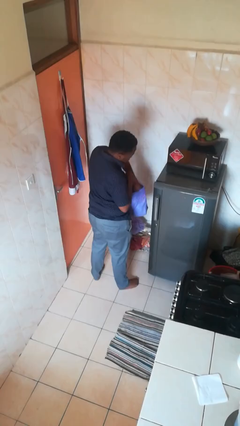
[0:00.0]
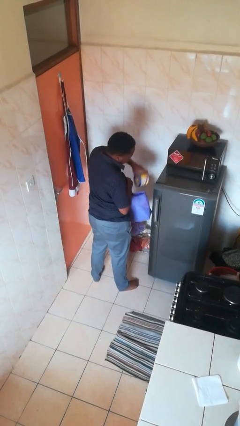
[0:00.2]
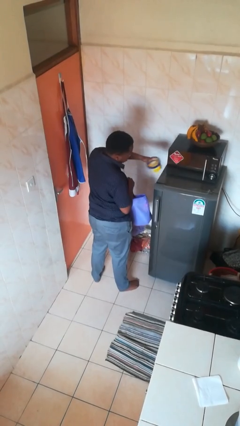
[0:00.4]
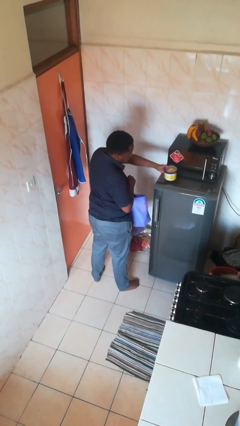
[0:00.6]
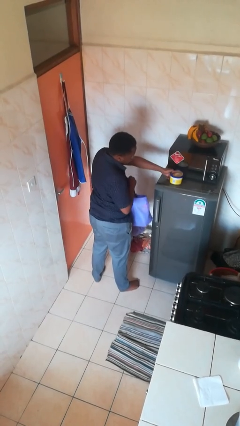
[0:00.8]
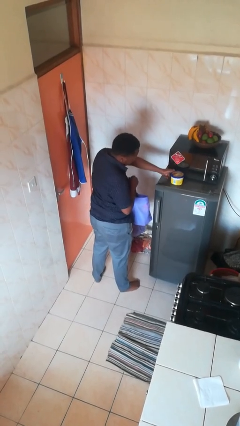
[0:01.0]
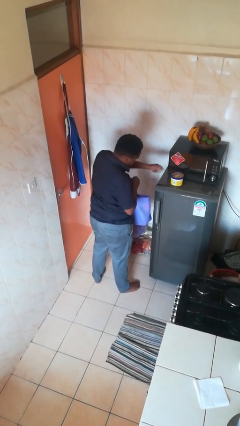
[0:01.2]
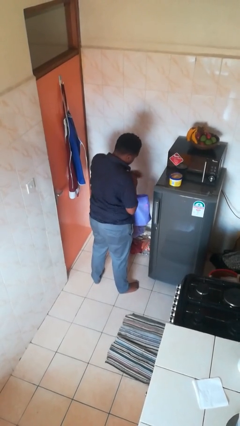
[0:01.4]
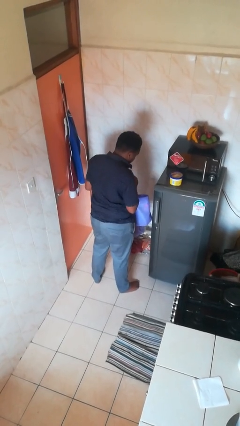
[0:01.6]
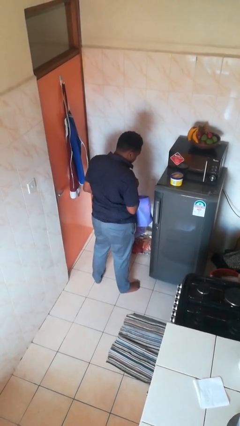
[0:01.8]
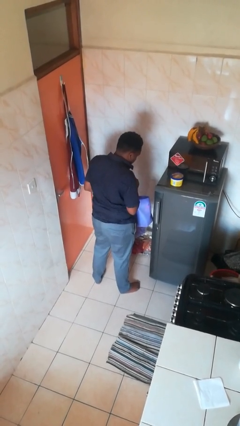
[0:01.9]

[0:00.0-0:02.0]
person takes object from bag

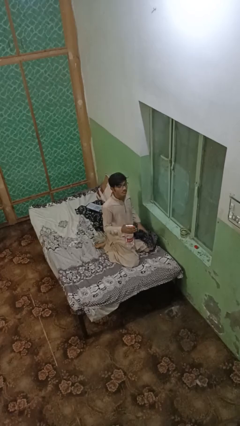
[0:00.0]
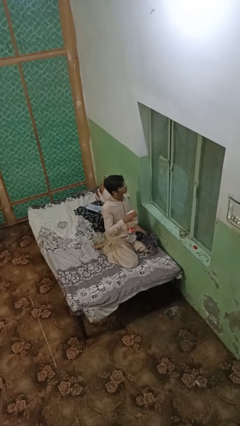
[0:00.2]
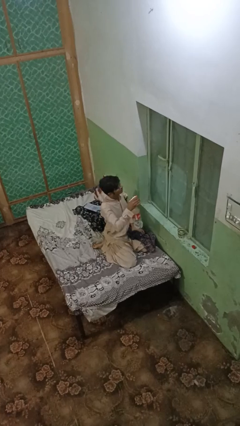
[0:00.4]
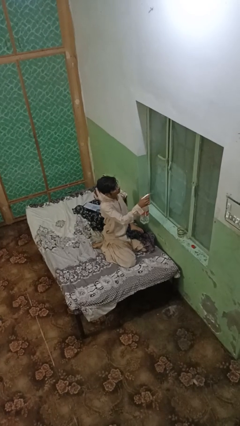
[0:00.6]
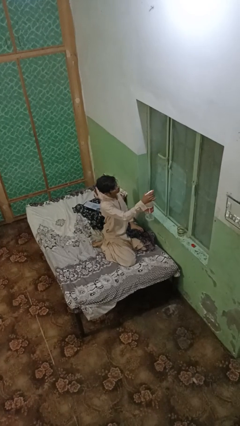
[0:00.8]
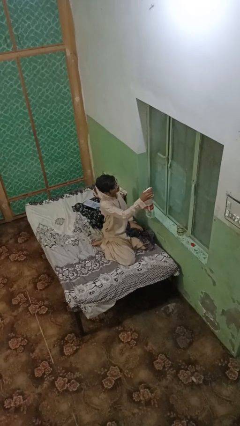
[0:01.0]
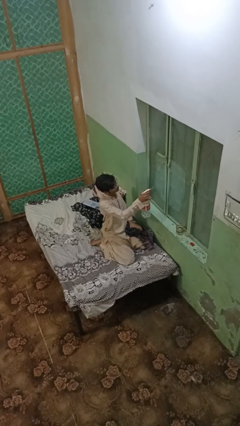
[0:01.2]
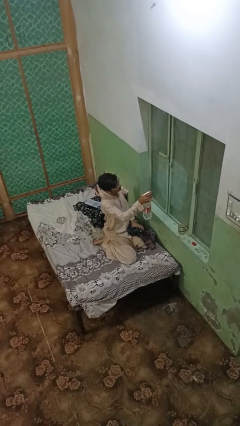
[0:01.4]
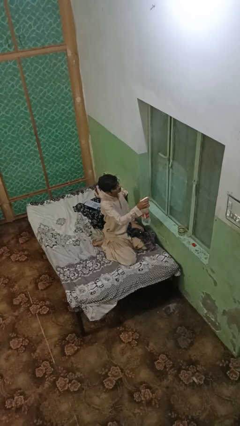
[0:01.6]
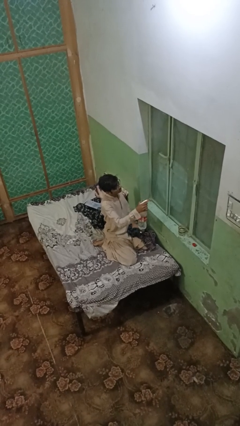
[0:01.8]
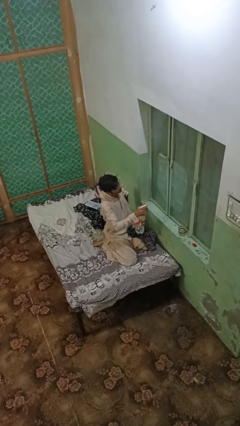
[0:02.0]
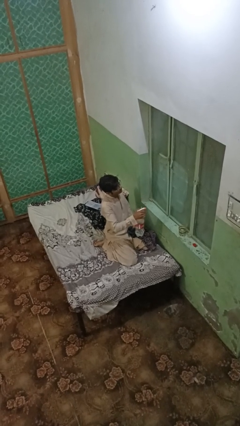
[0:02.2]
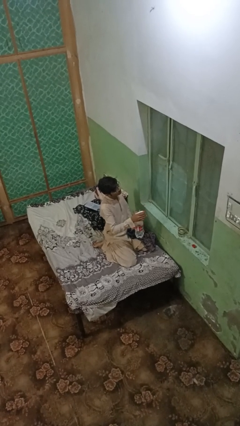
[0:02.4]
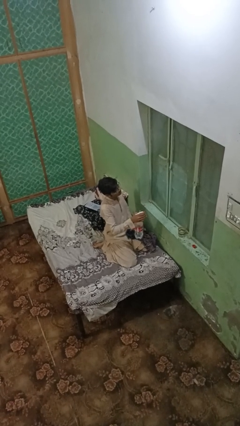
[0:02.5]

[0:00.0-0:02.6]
person sprays from bottle

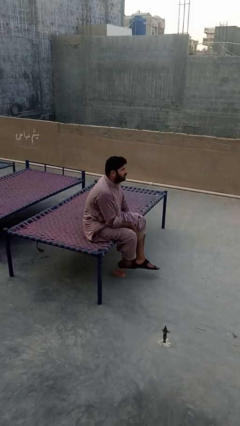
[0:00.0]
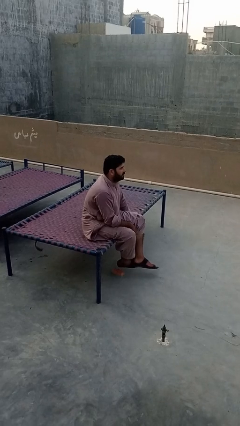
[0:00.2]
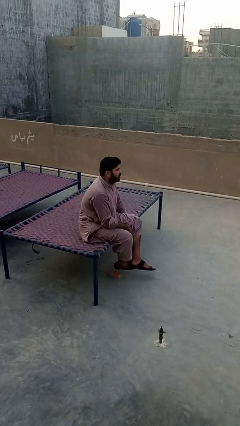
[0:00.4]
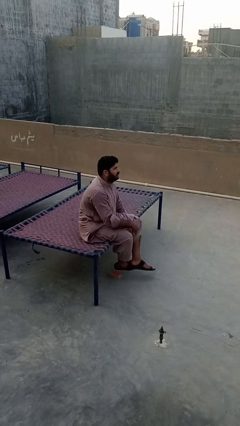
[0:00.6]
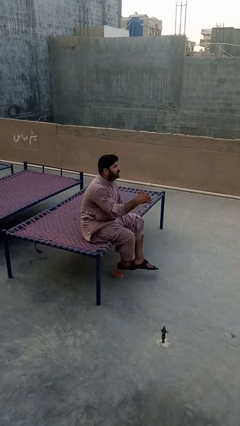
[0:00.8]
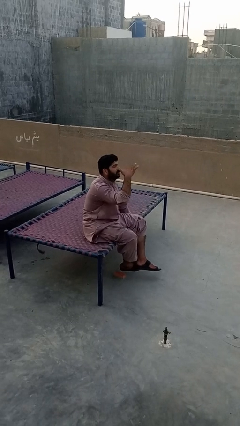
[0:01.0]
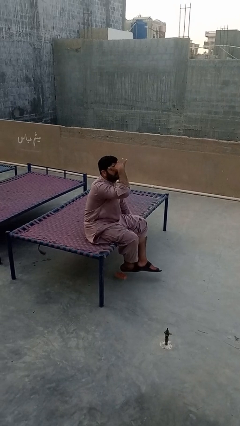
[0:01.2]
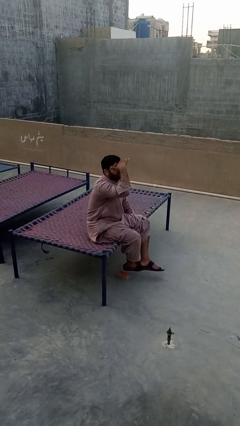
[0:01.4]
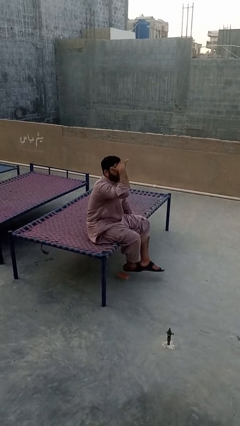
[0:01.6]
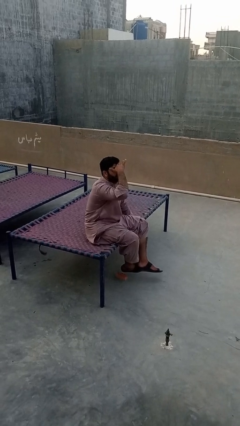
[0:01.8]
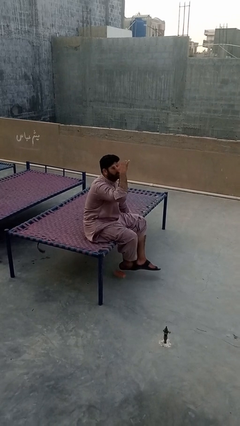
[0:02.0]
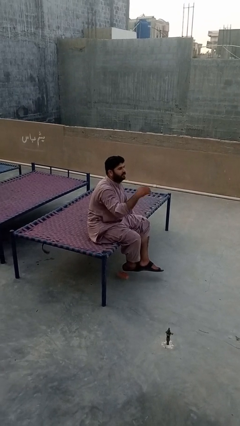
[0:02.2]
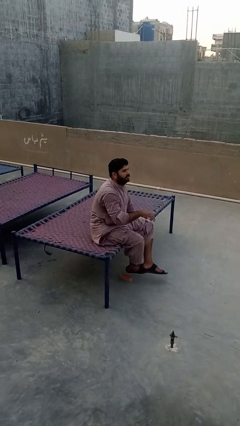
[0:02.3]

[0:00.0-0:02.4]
person shades eyes

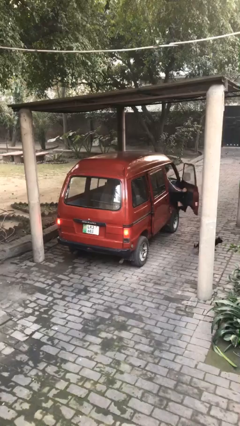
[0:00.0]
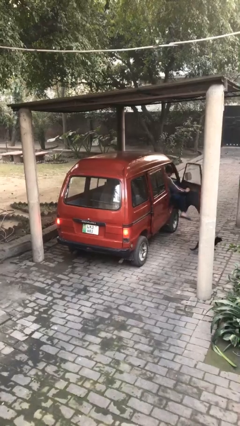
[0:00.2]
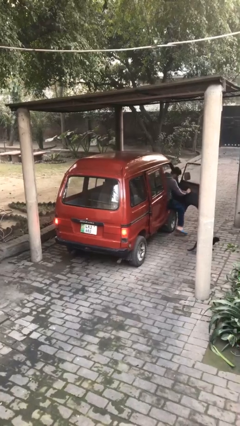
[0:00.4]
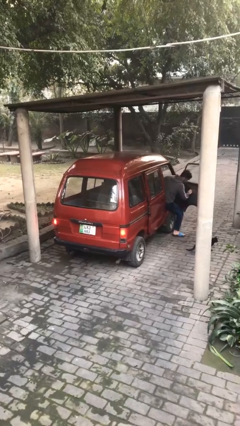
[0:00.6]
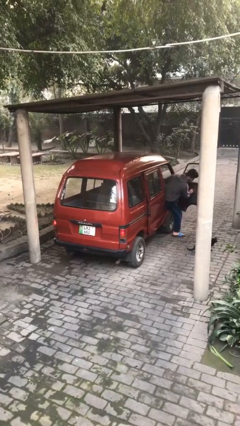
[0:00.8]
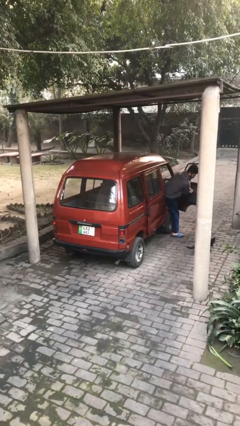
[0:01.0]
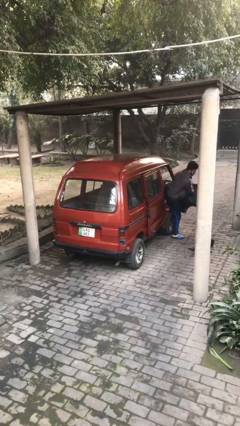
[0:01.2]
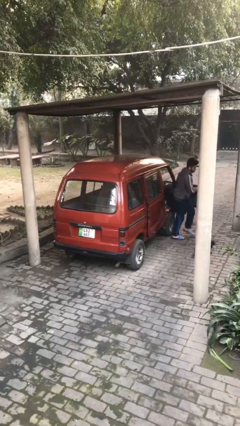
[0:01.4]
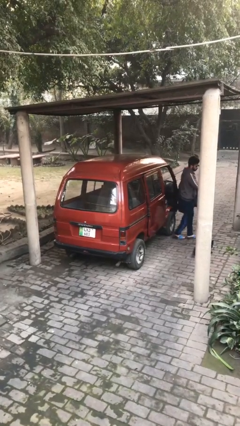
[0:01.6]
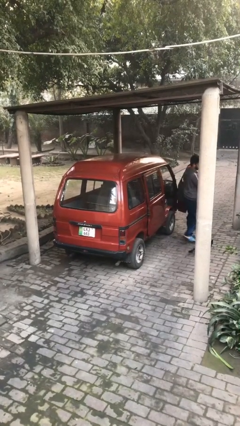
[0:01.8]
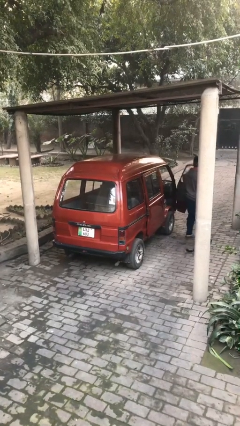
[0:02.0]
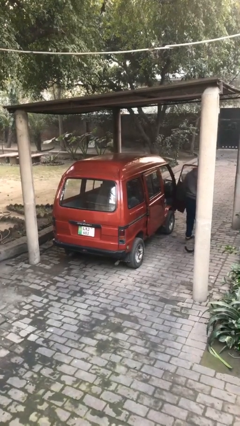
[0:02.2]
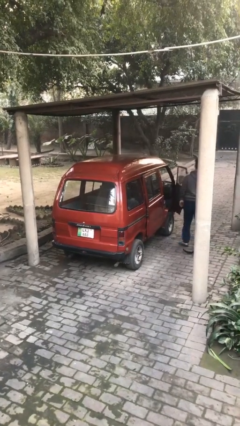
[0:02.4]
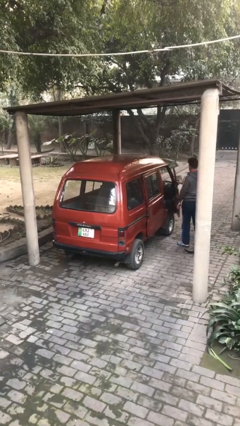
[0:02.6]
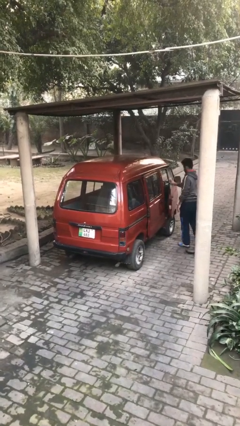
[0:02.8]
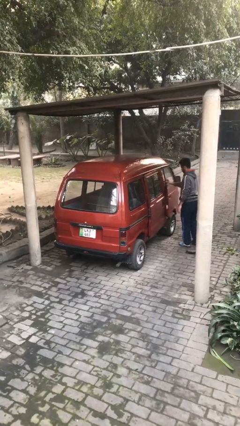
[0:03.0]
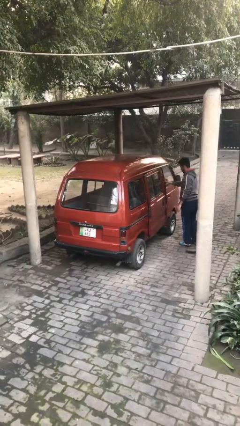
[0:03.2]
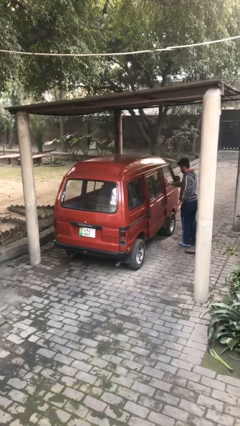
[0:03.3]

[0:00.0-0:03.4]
car drops off person

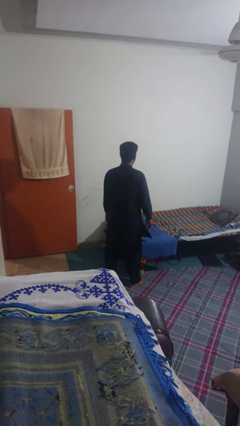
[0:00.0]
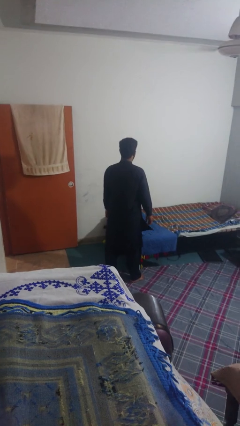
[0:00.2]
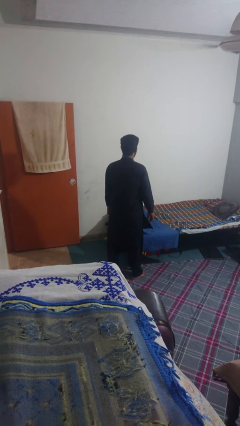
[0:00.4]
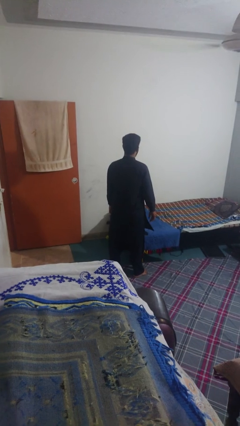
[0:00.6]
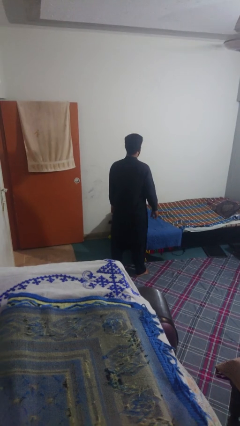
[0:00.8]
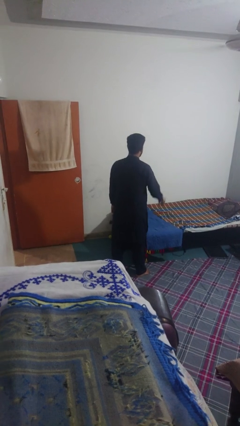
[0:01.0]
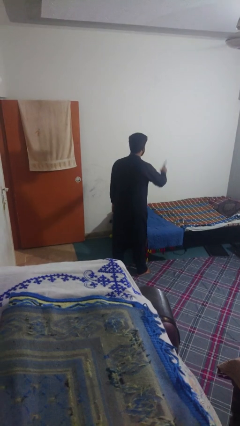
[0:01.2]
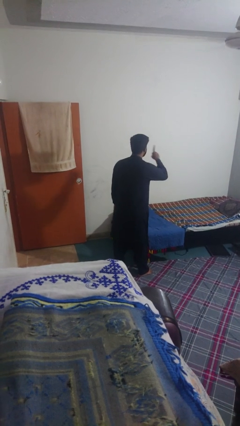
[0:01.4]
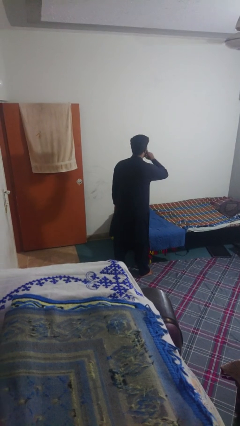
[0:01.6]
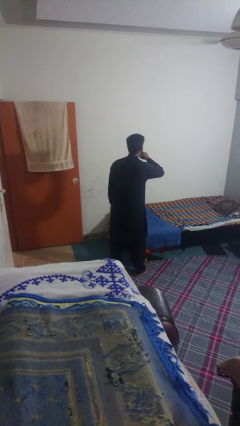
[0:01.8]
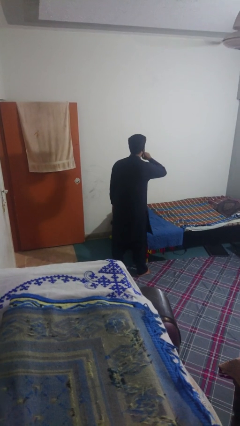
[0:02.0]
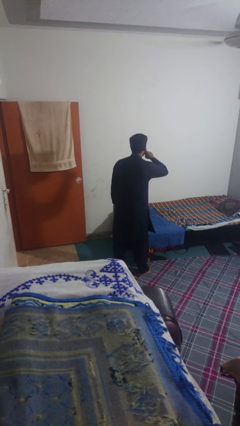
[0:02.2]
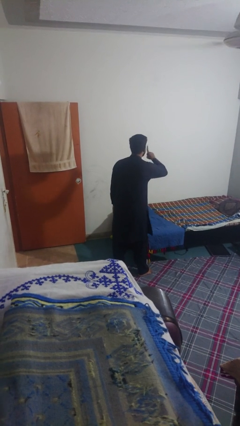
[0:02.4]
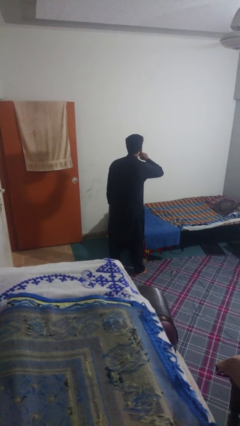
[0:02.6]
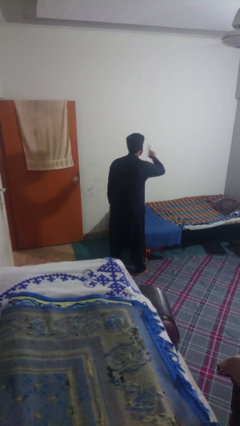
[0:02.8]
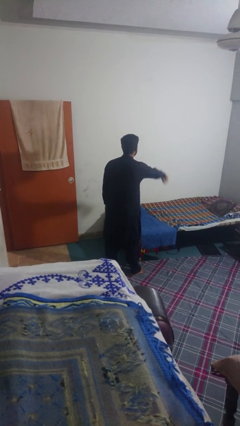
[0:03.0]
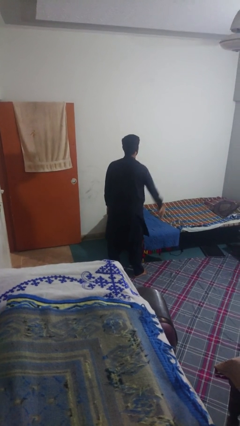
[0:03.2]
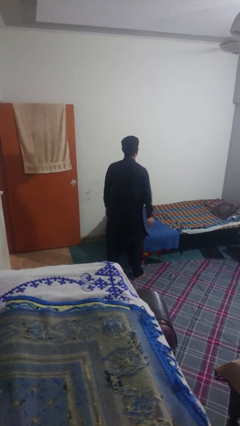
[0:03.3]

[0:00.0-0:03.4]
person gestures be quiet

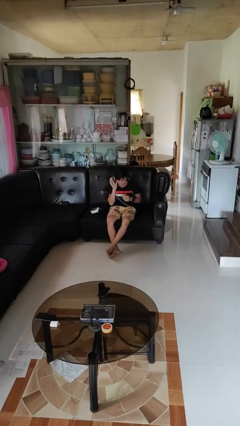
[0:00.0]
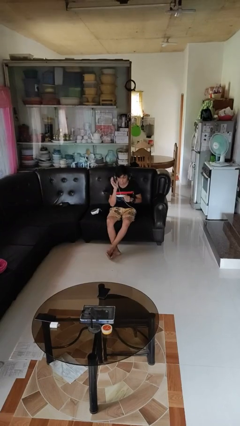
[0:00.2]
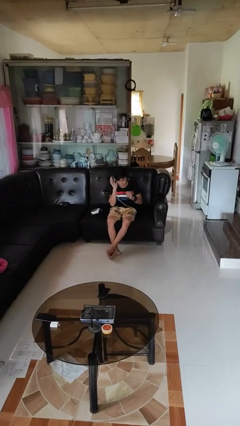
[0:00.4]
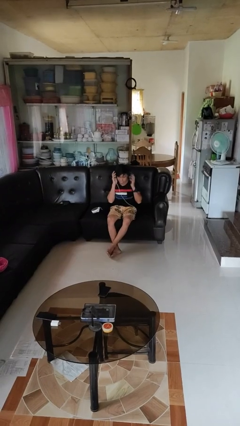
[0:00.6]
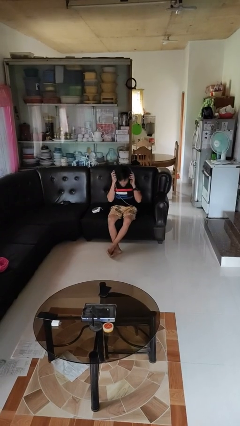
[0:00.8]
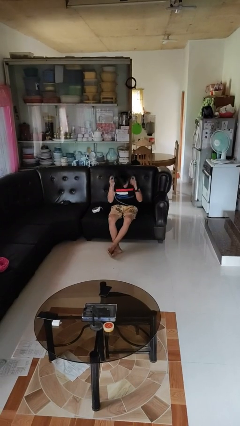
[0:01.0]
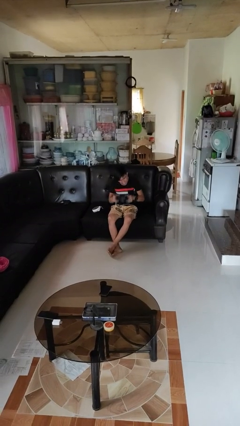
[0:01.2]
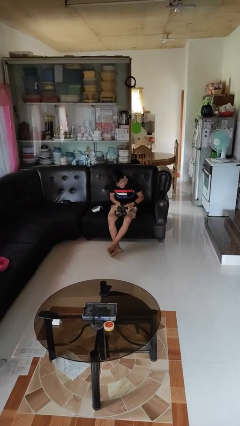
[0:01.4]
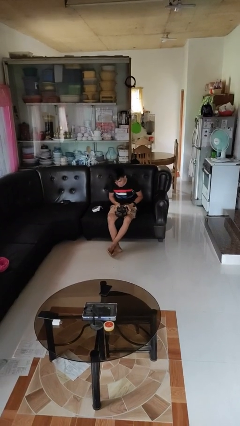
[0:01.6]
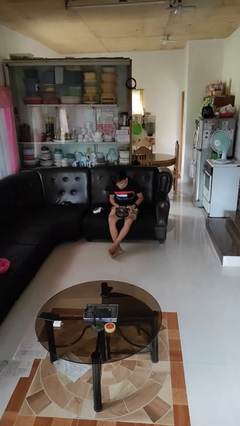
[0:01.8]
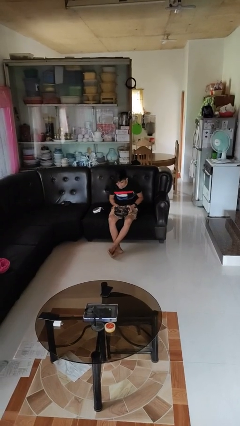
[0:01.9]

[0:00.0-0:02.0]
person takes off headphones

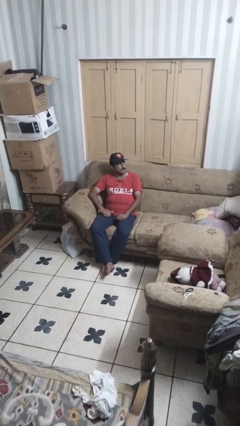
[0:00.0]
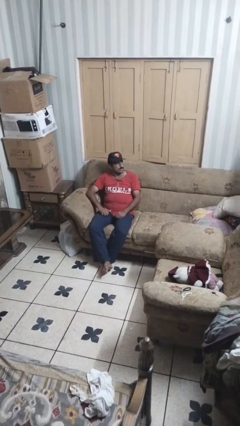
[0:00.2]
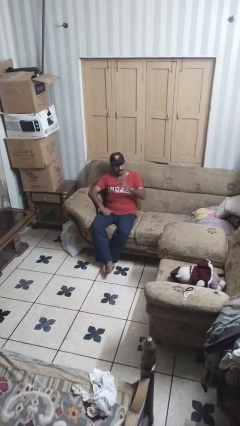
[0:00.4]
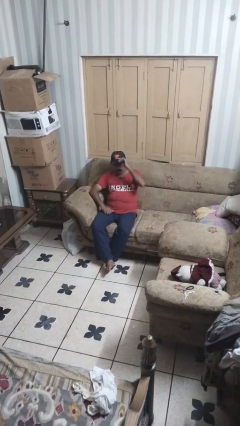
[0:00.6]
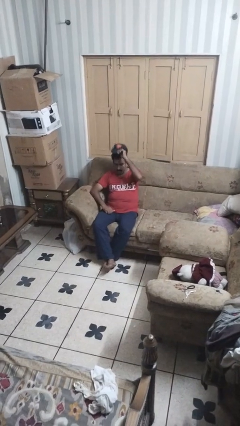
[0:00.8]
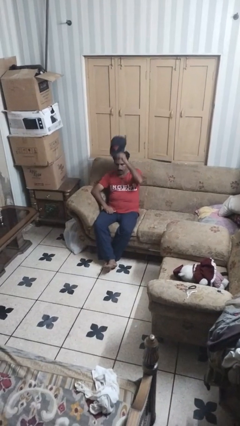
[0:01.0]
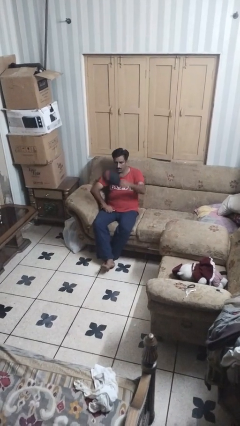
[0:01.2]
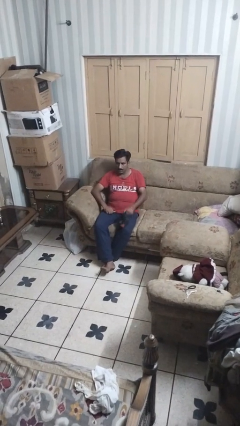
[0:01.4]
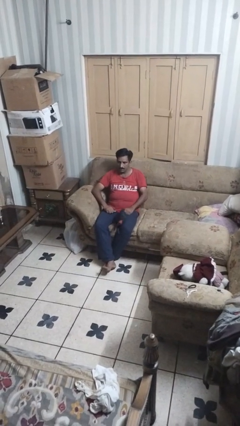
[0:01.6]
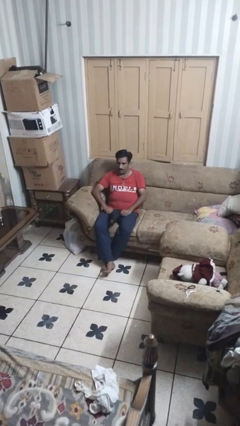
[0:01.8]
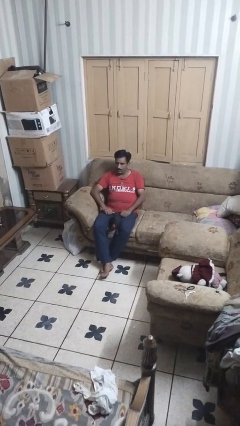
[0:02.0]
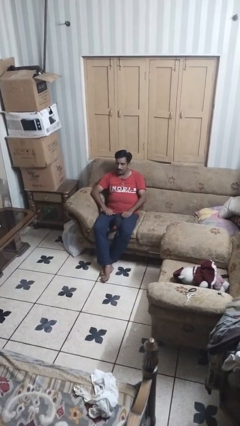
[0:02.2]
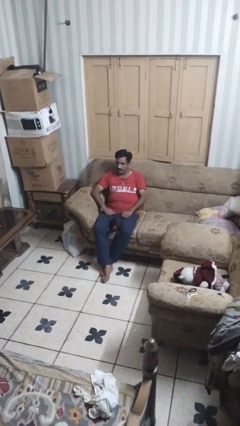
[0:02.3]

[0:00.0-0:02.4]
person takes off hat
